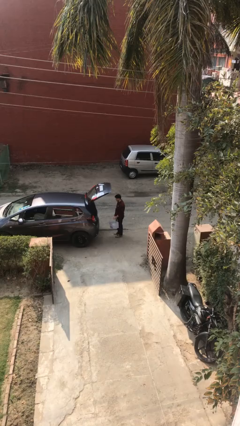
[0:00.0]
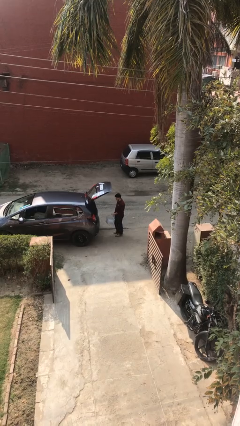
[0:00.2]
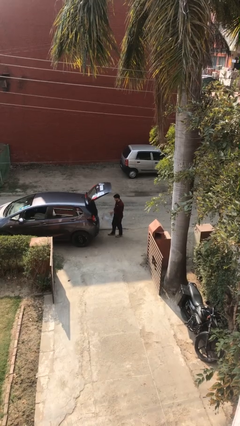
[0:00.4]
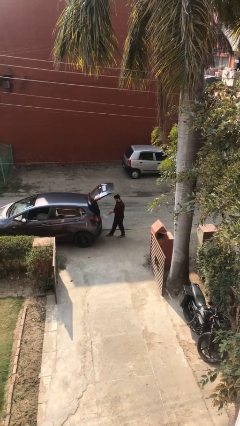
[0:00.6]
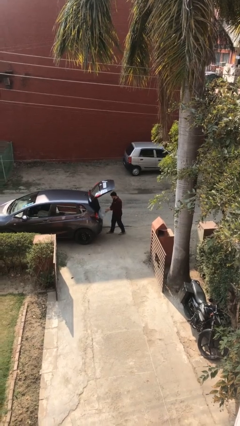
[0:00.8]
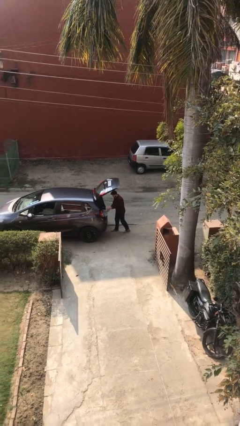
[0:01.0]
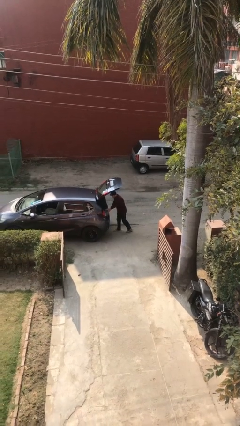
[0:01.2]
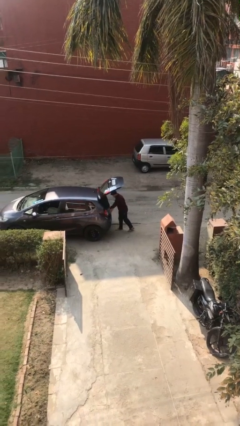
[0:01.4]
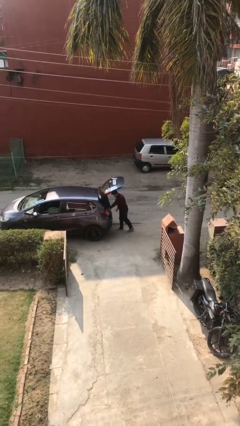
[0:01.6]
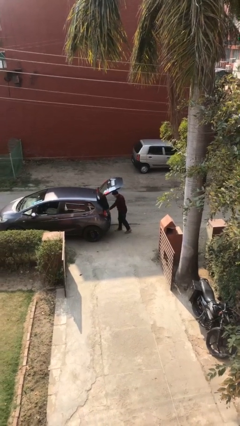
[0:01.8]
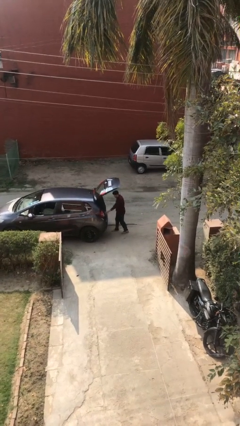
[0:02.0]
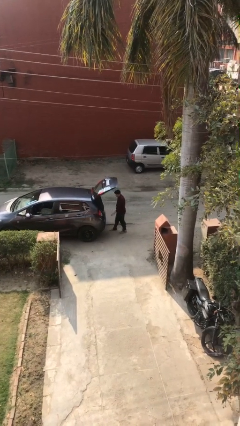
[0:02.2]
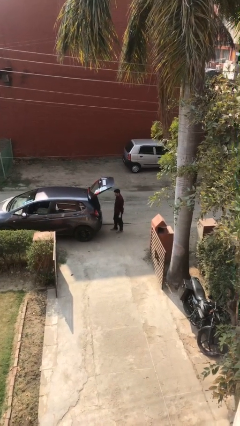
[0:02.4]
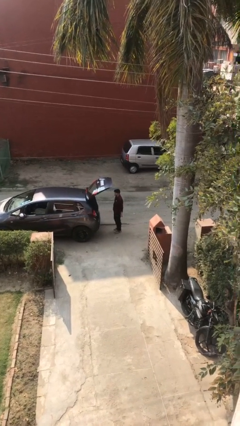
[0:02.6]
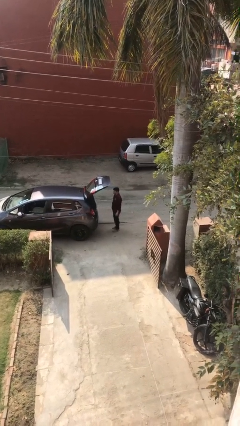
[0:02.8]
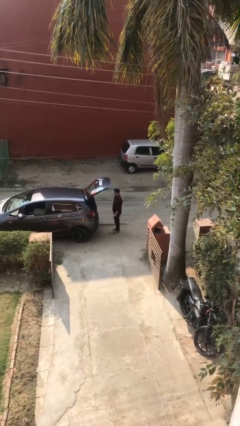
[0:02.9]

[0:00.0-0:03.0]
person loads car

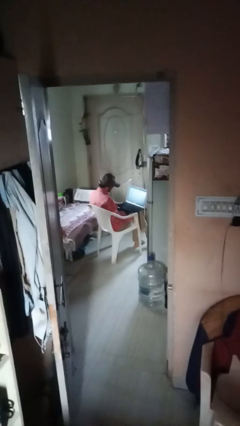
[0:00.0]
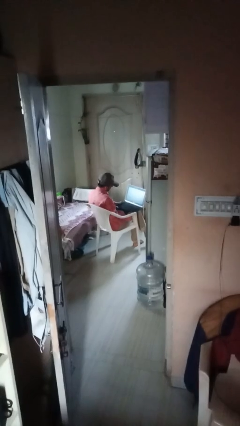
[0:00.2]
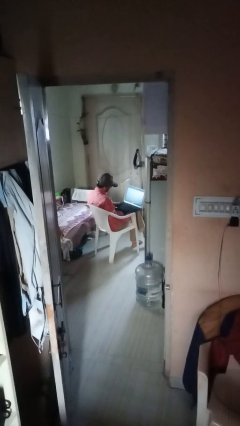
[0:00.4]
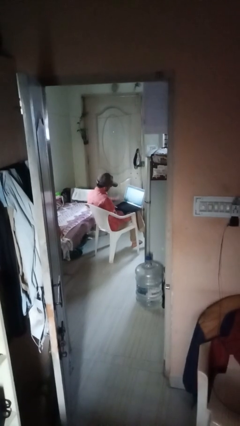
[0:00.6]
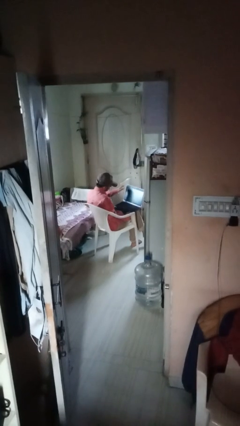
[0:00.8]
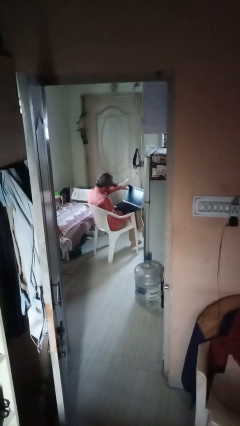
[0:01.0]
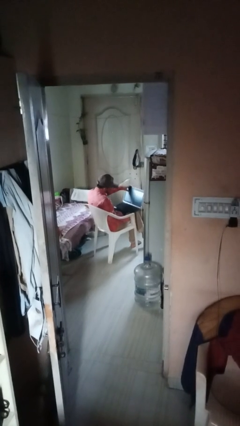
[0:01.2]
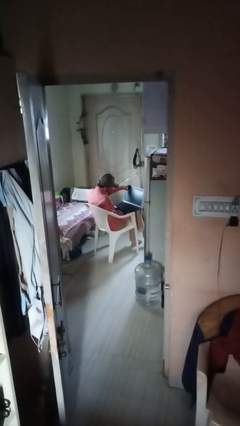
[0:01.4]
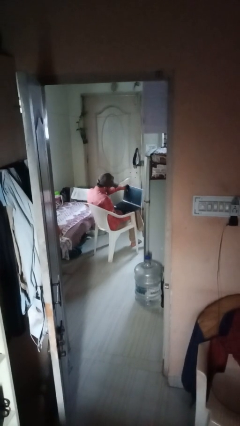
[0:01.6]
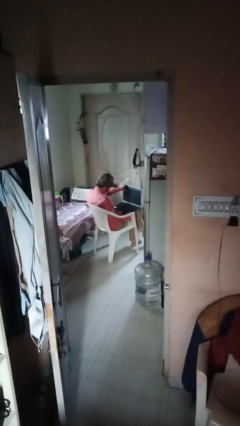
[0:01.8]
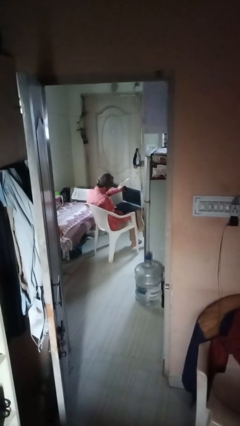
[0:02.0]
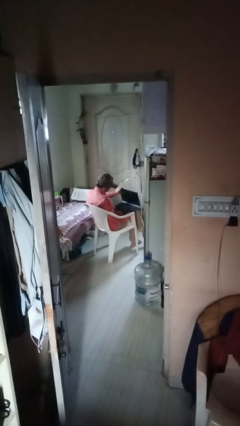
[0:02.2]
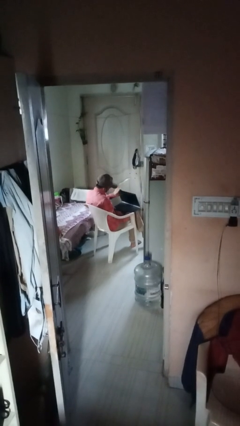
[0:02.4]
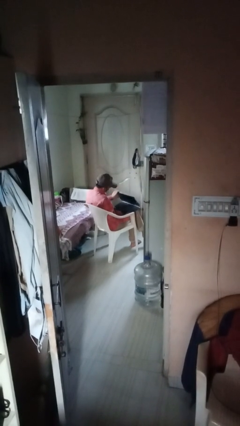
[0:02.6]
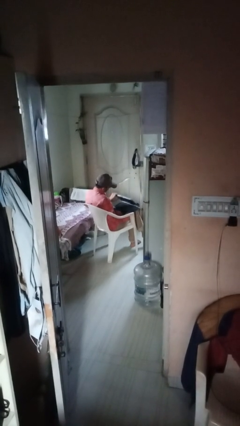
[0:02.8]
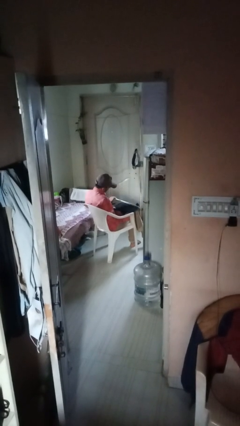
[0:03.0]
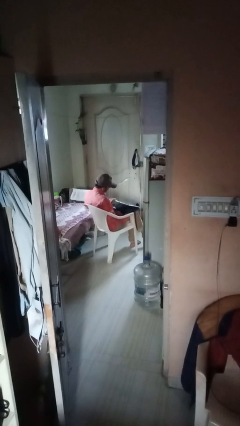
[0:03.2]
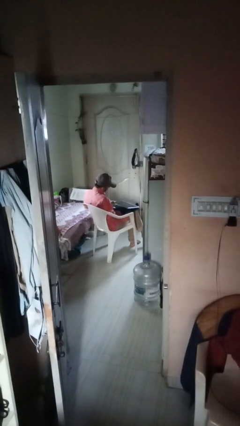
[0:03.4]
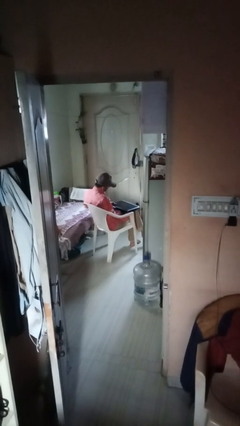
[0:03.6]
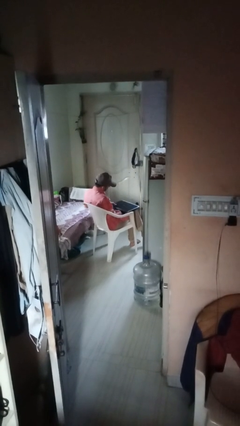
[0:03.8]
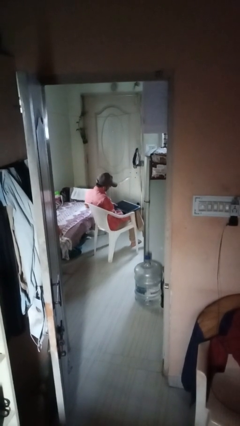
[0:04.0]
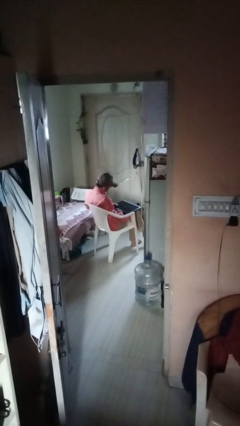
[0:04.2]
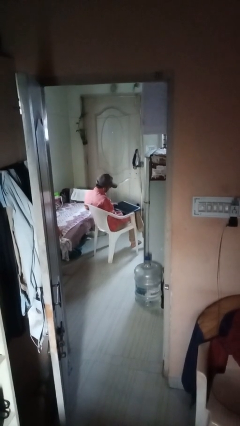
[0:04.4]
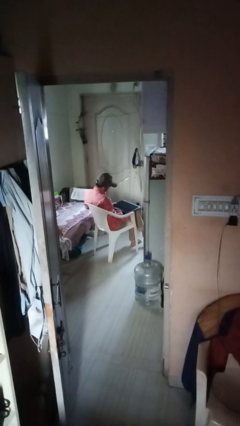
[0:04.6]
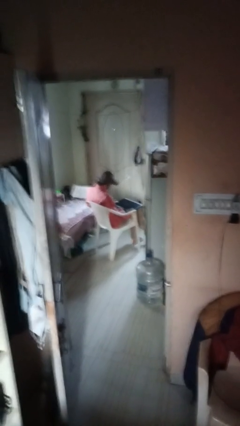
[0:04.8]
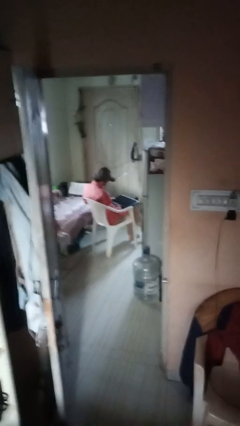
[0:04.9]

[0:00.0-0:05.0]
person closes laptop

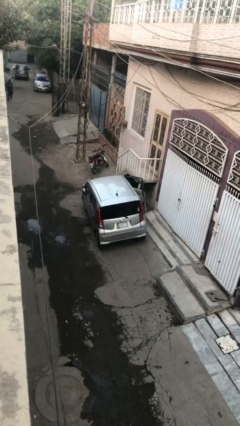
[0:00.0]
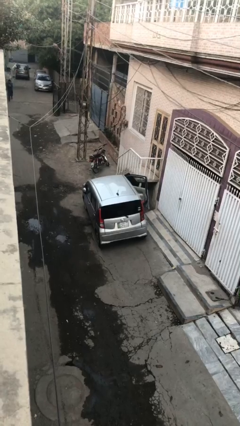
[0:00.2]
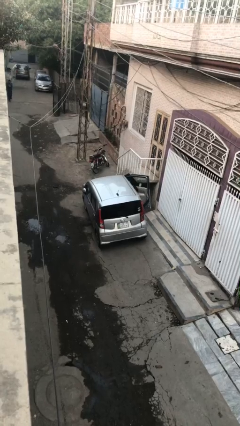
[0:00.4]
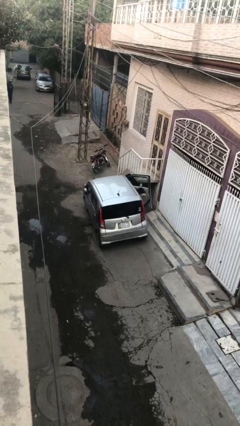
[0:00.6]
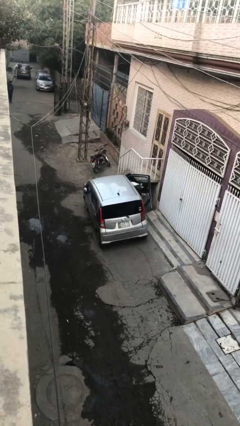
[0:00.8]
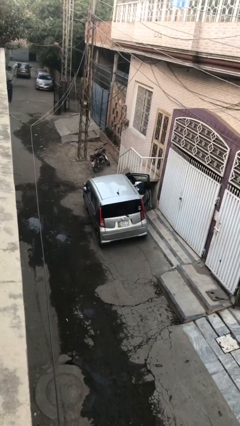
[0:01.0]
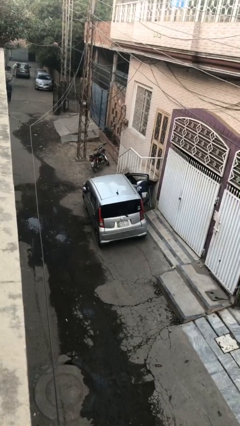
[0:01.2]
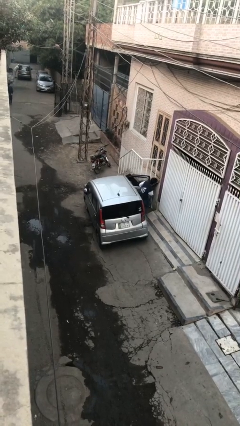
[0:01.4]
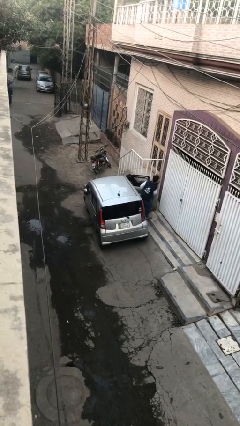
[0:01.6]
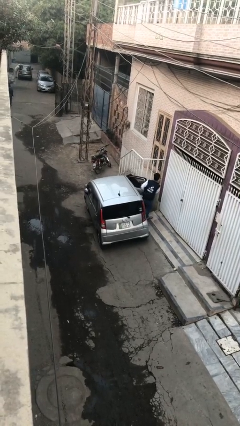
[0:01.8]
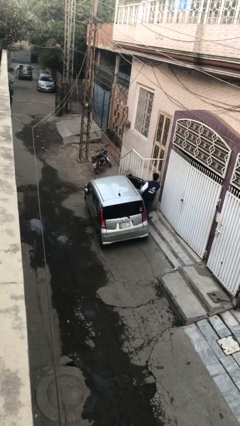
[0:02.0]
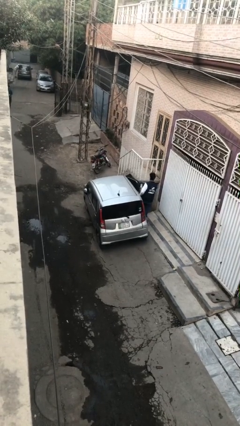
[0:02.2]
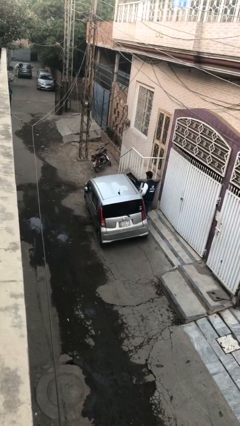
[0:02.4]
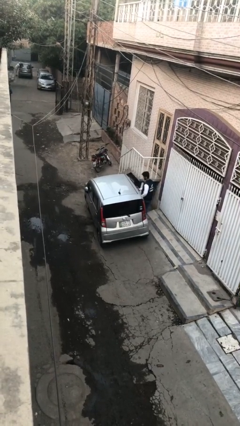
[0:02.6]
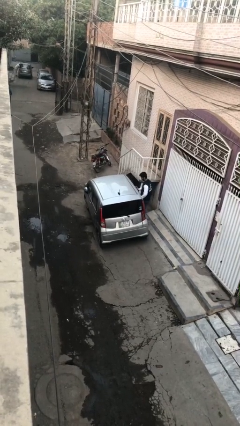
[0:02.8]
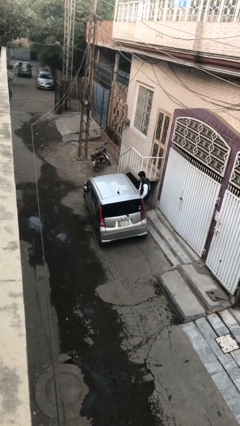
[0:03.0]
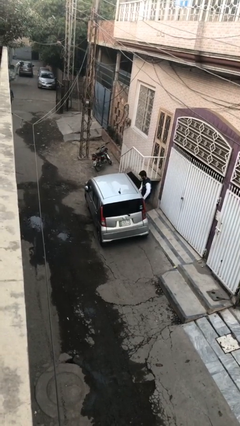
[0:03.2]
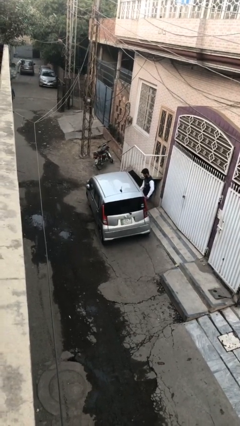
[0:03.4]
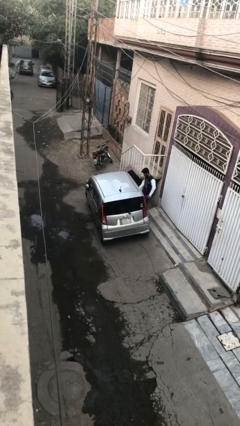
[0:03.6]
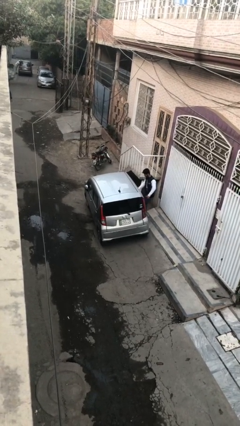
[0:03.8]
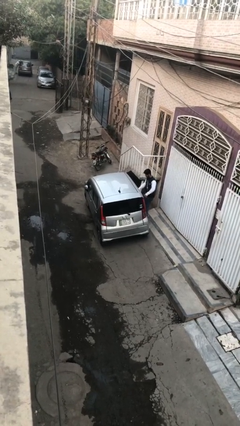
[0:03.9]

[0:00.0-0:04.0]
car drops off person

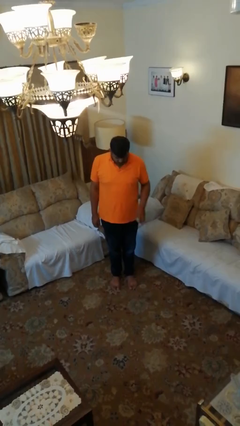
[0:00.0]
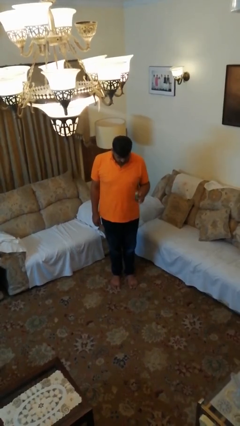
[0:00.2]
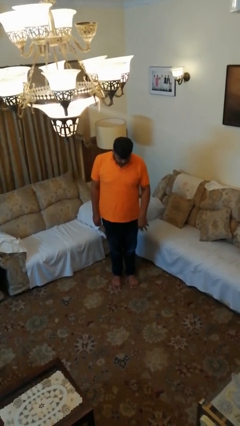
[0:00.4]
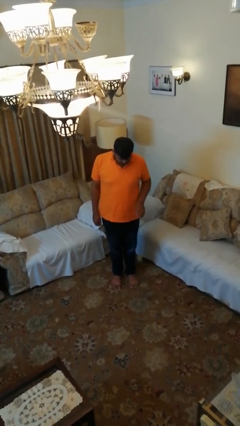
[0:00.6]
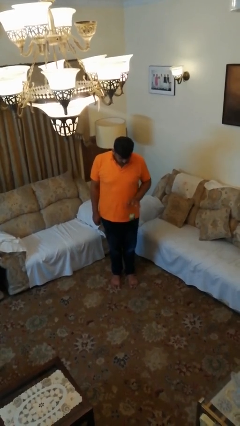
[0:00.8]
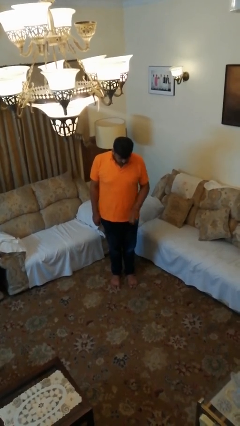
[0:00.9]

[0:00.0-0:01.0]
person bounces ball on floor

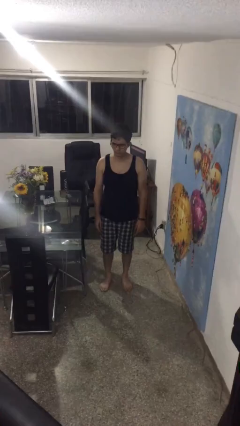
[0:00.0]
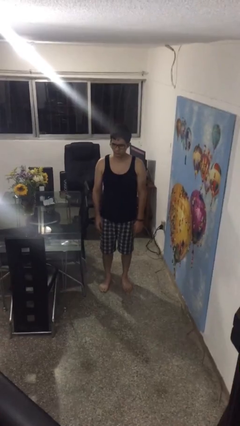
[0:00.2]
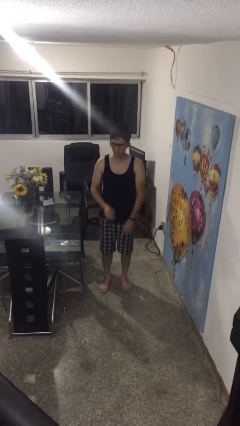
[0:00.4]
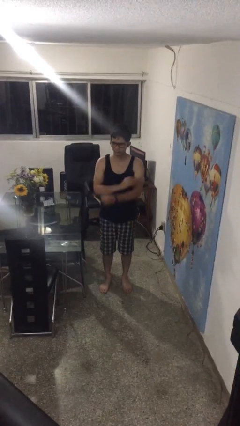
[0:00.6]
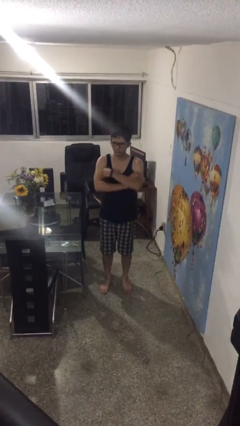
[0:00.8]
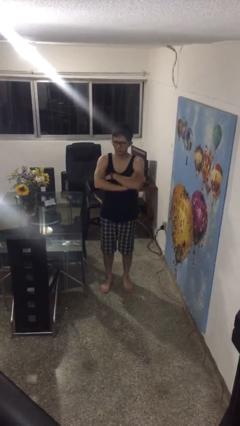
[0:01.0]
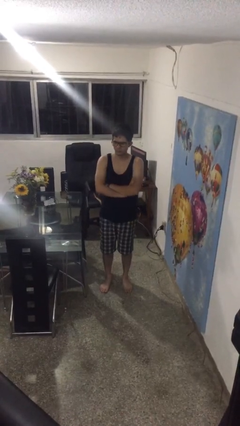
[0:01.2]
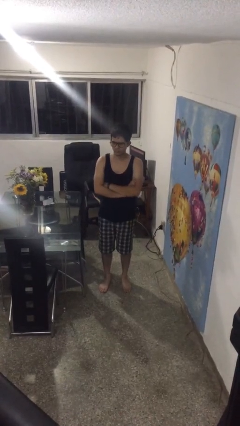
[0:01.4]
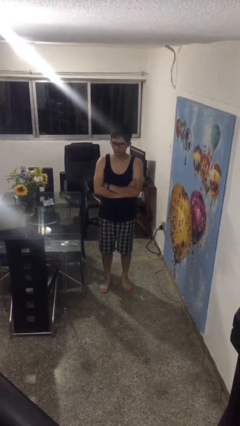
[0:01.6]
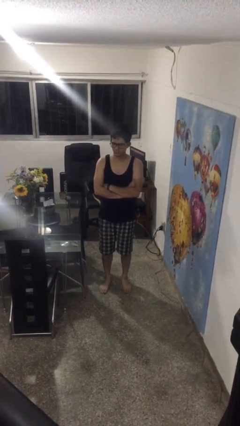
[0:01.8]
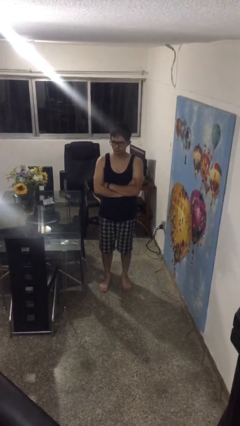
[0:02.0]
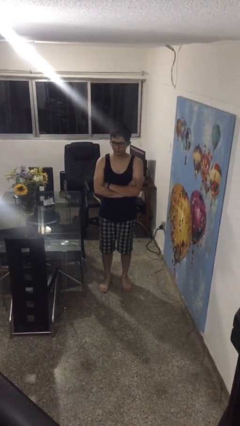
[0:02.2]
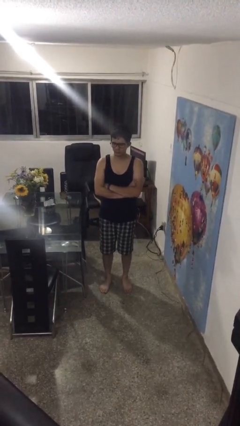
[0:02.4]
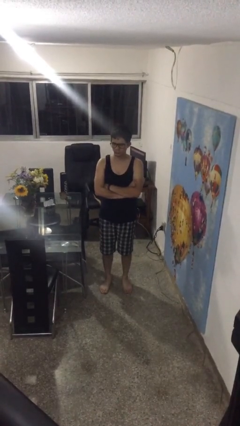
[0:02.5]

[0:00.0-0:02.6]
person crosses arms

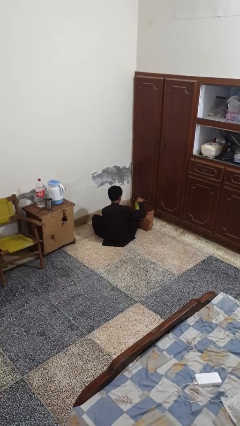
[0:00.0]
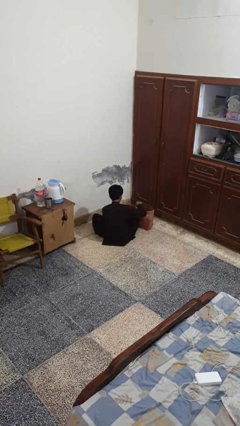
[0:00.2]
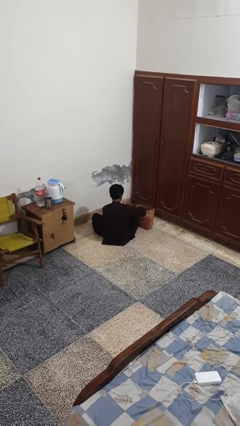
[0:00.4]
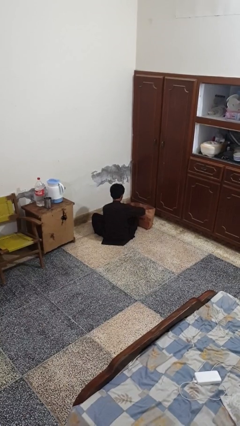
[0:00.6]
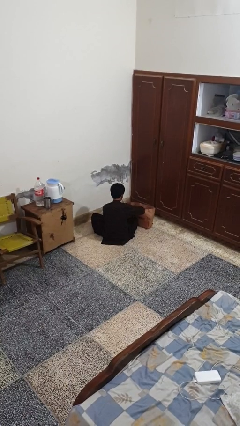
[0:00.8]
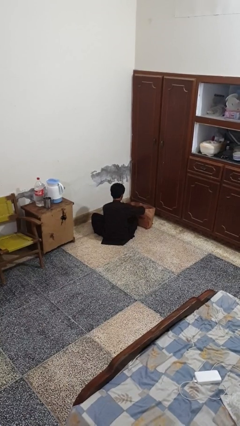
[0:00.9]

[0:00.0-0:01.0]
person puts object into bag

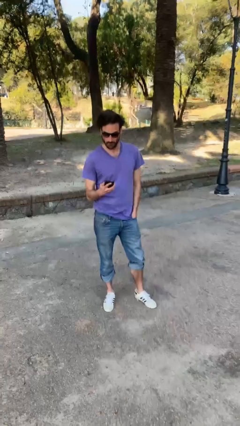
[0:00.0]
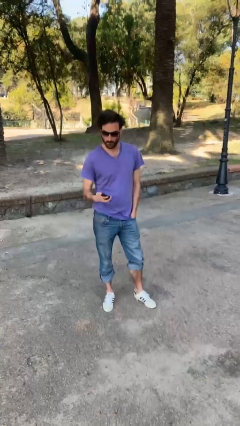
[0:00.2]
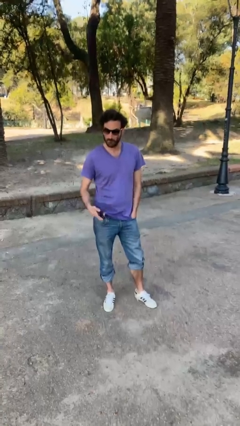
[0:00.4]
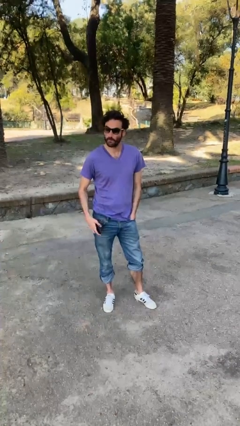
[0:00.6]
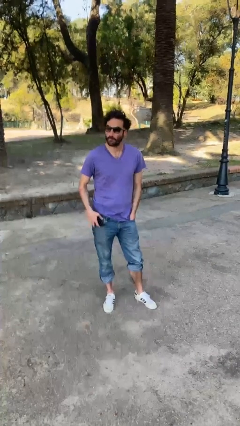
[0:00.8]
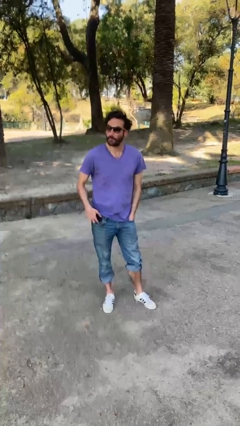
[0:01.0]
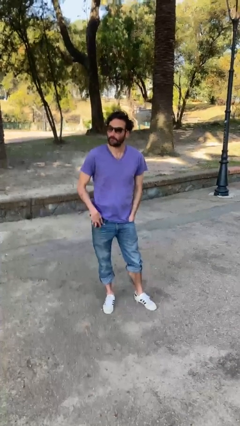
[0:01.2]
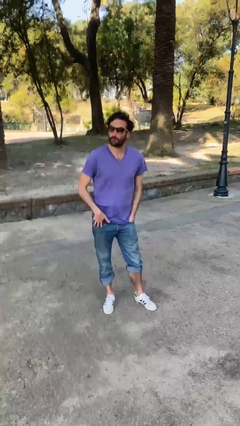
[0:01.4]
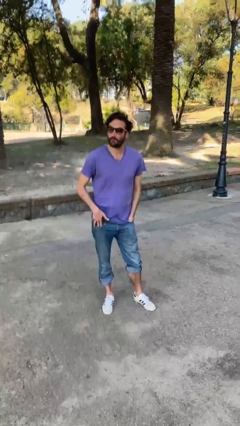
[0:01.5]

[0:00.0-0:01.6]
person puts phone into pocket
